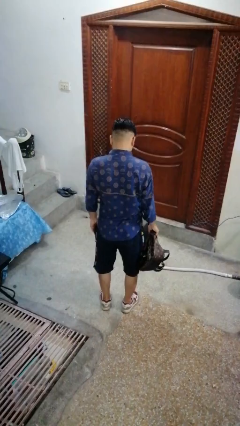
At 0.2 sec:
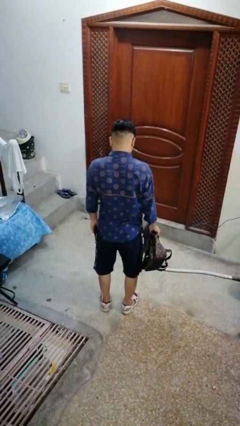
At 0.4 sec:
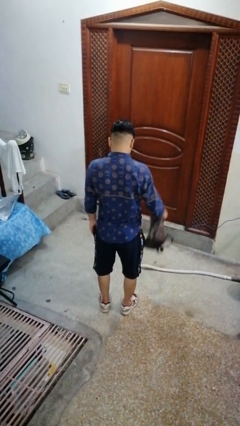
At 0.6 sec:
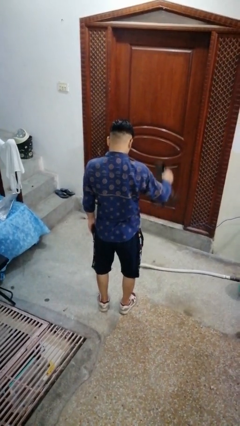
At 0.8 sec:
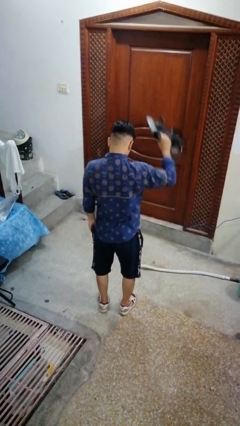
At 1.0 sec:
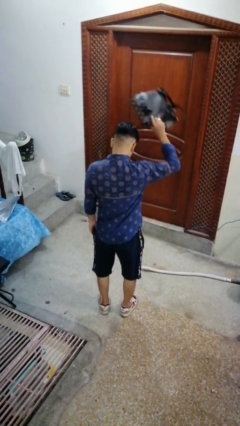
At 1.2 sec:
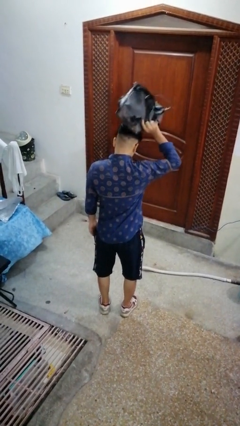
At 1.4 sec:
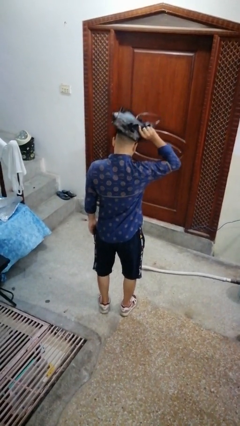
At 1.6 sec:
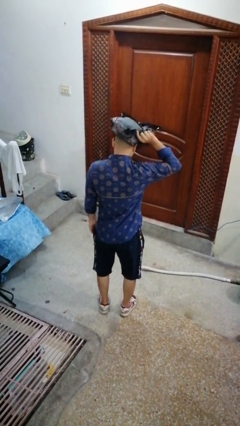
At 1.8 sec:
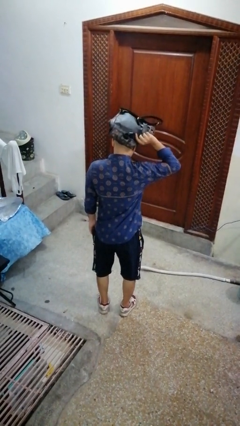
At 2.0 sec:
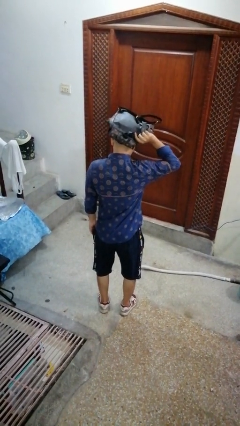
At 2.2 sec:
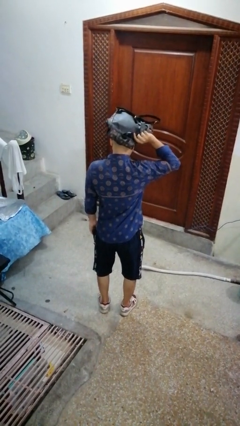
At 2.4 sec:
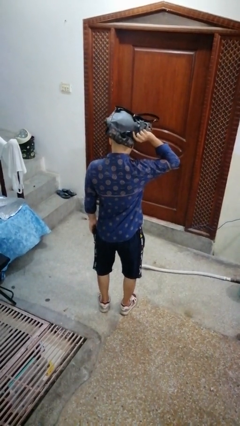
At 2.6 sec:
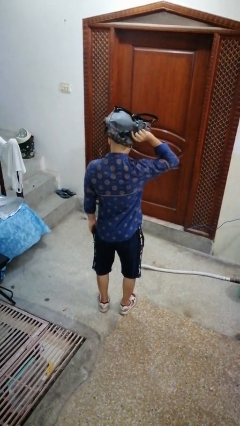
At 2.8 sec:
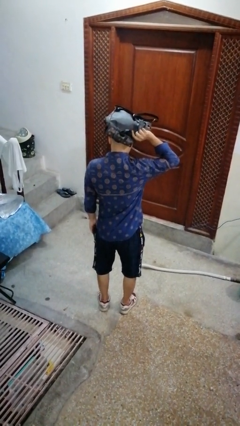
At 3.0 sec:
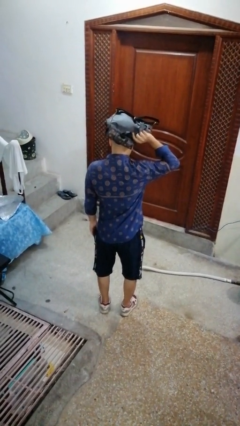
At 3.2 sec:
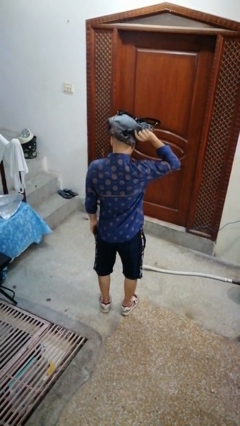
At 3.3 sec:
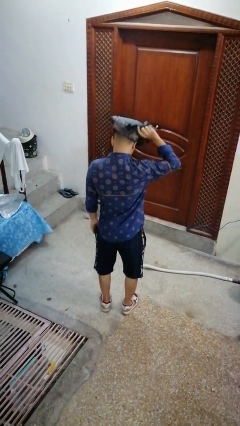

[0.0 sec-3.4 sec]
person holds object above head

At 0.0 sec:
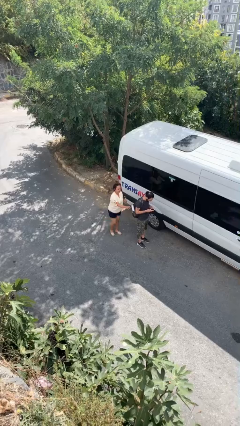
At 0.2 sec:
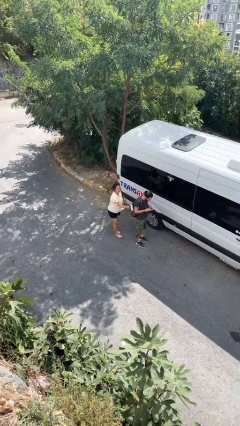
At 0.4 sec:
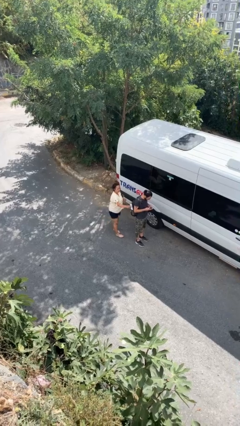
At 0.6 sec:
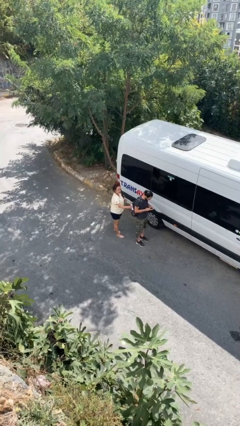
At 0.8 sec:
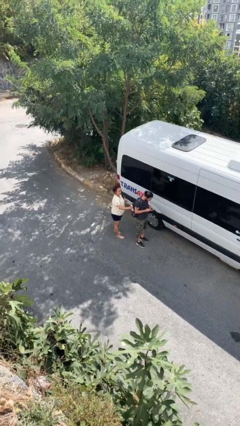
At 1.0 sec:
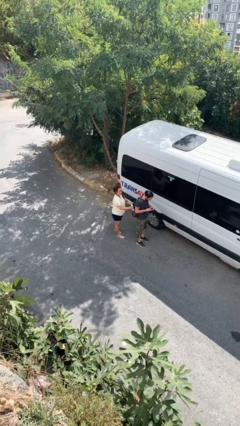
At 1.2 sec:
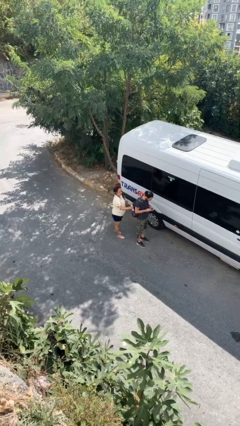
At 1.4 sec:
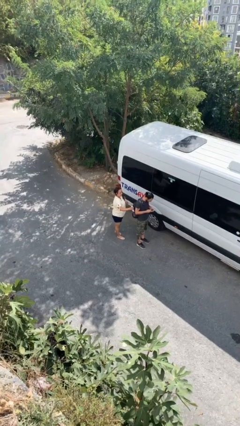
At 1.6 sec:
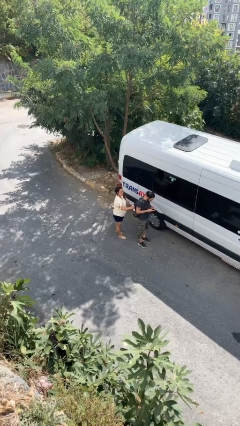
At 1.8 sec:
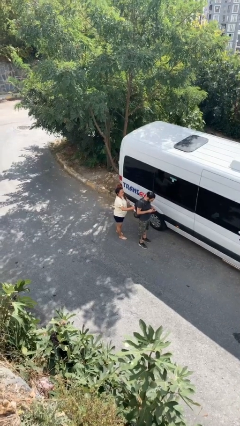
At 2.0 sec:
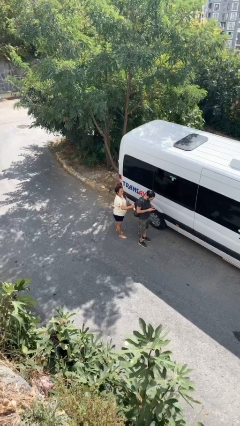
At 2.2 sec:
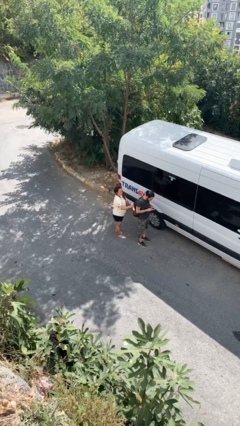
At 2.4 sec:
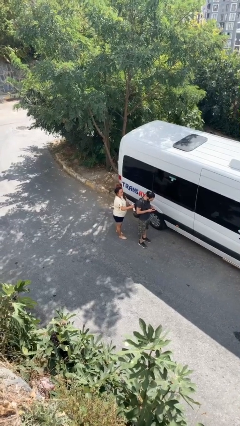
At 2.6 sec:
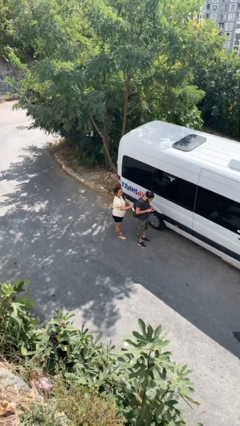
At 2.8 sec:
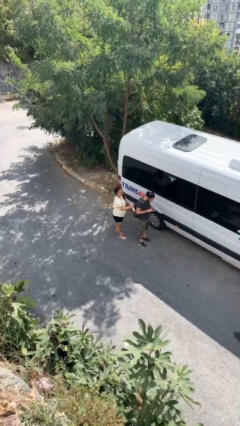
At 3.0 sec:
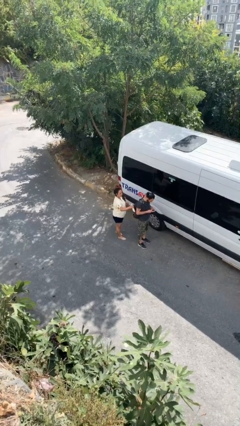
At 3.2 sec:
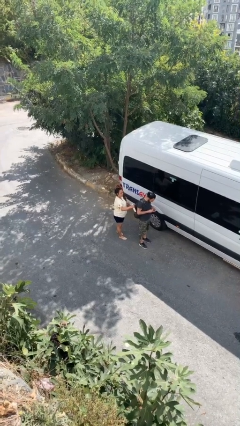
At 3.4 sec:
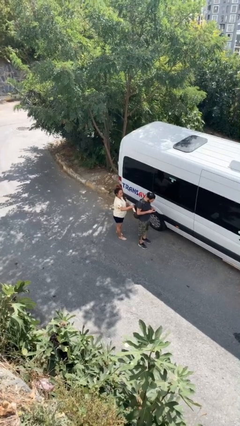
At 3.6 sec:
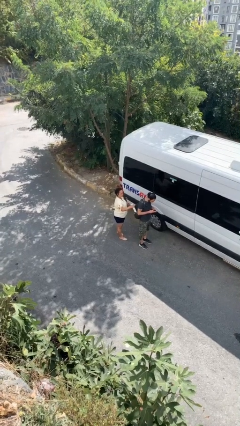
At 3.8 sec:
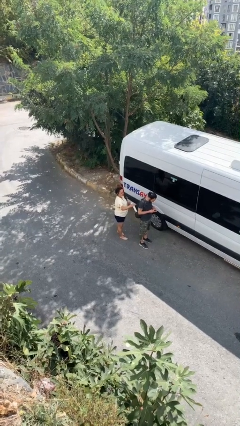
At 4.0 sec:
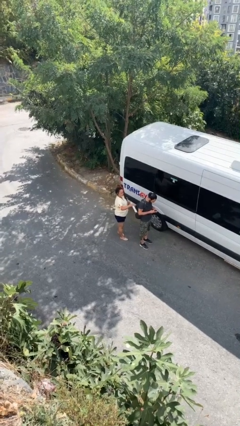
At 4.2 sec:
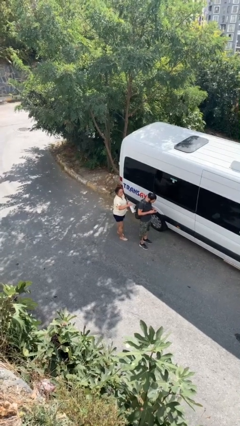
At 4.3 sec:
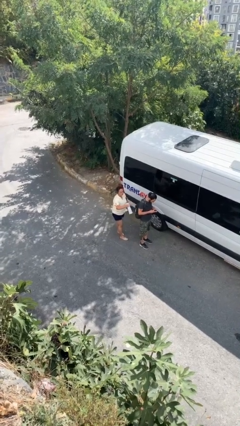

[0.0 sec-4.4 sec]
person steals object from person

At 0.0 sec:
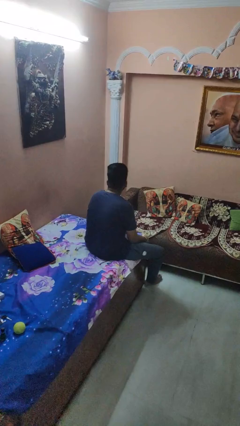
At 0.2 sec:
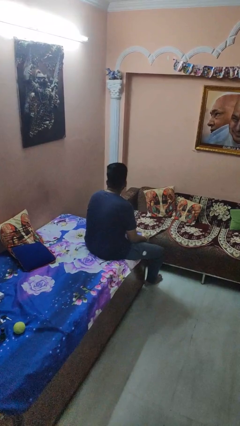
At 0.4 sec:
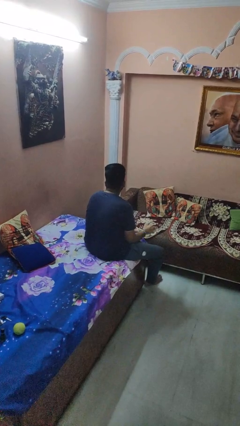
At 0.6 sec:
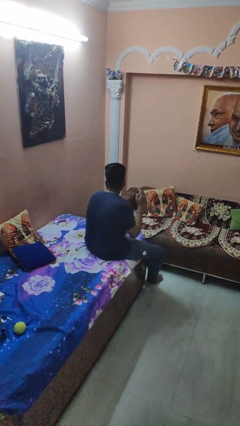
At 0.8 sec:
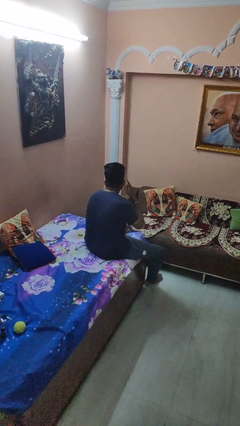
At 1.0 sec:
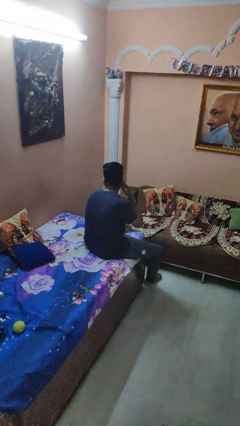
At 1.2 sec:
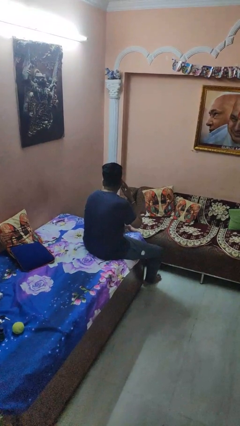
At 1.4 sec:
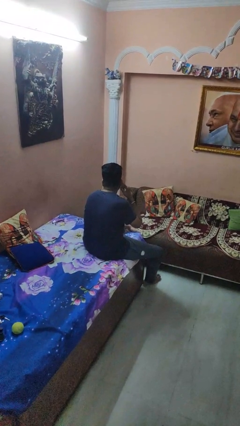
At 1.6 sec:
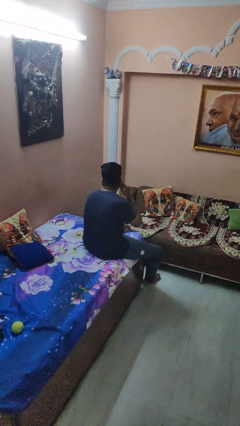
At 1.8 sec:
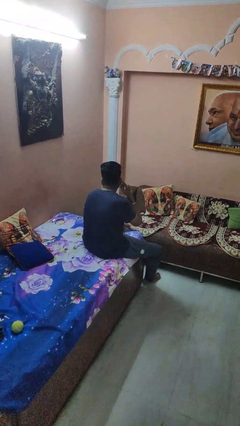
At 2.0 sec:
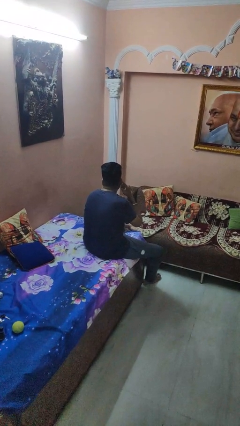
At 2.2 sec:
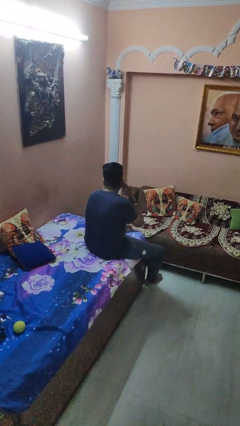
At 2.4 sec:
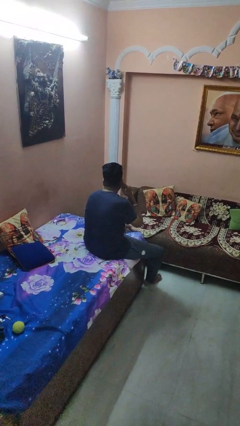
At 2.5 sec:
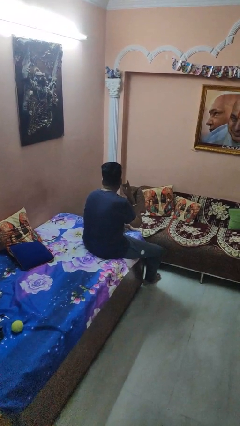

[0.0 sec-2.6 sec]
person gestures listen closely

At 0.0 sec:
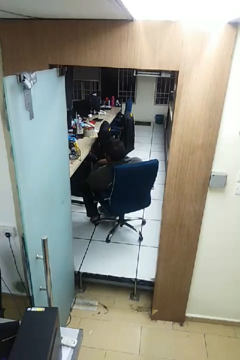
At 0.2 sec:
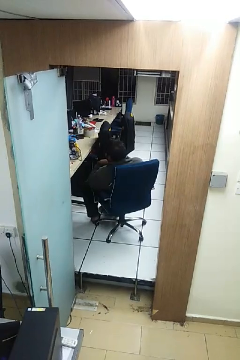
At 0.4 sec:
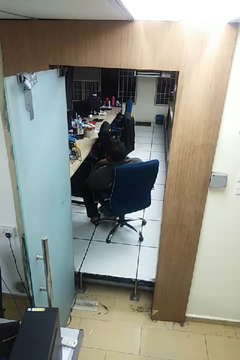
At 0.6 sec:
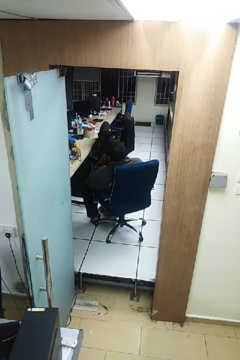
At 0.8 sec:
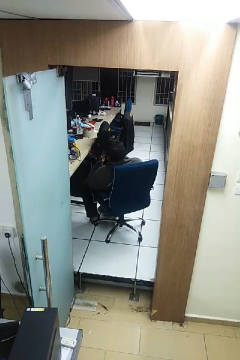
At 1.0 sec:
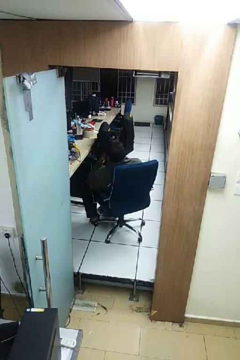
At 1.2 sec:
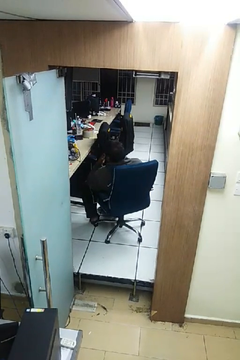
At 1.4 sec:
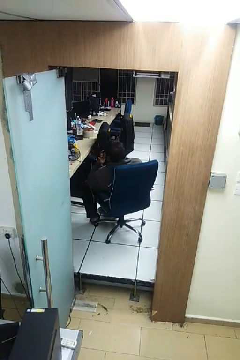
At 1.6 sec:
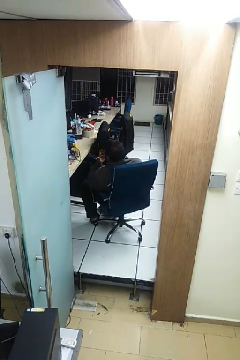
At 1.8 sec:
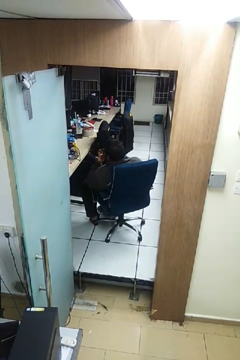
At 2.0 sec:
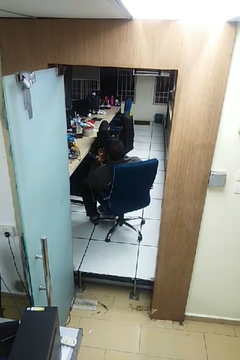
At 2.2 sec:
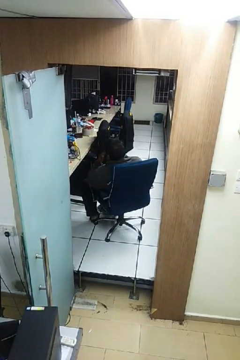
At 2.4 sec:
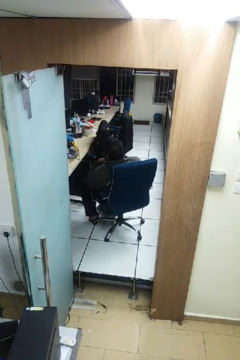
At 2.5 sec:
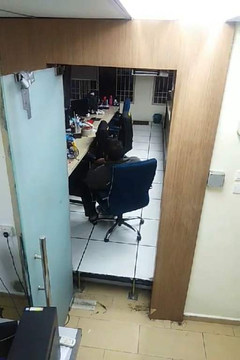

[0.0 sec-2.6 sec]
person licks fingers

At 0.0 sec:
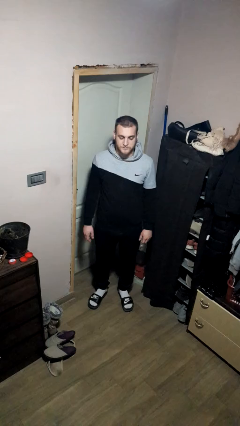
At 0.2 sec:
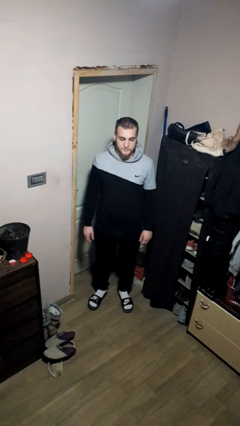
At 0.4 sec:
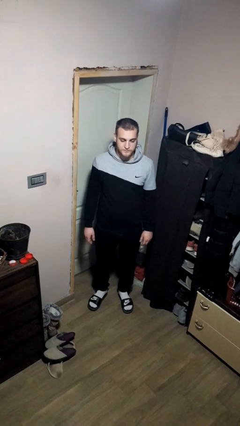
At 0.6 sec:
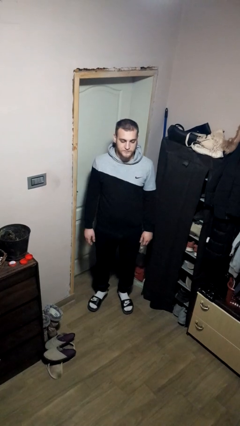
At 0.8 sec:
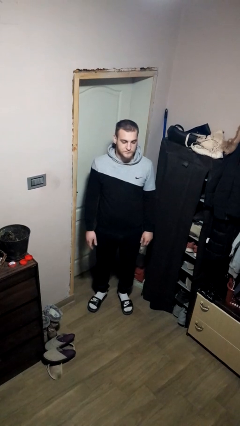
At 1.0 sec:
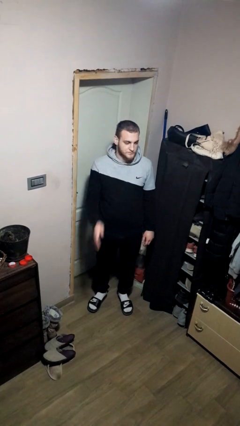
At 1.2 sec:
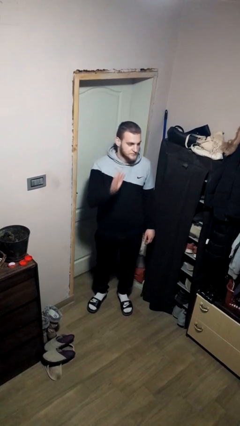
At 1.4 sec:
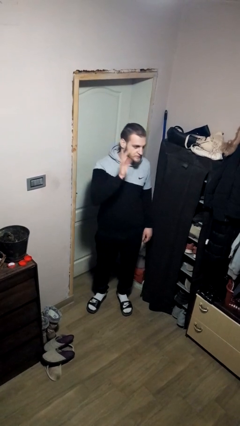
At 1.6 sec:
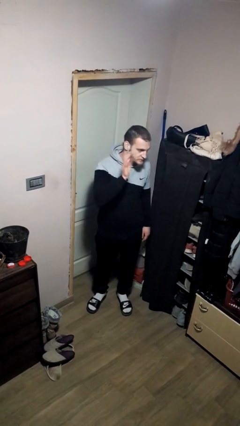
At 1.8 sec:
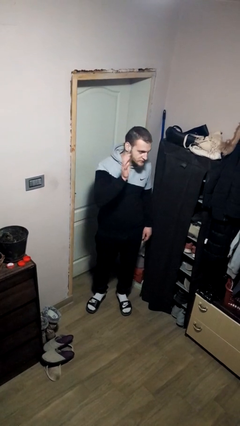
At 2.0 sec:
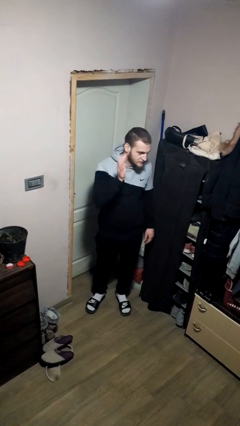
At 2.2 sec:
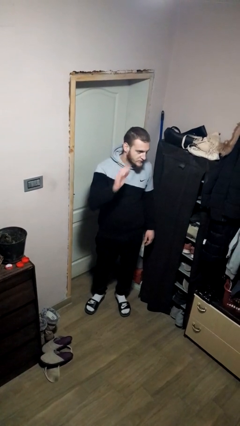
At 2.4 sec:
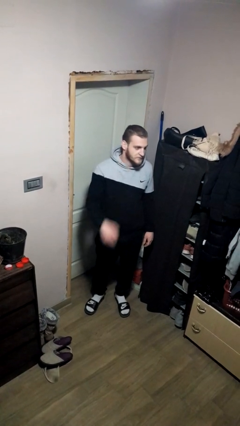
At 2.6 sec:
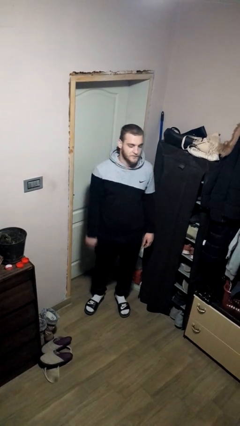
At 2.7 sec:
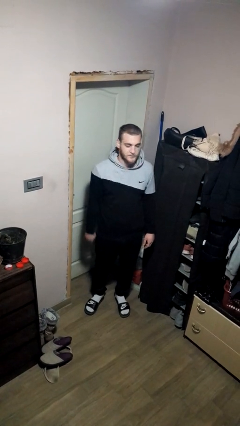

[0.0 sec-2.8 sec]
person waves at person

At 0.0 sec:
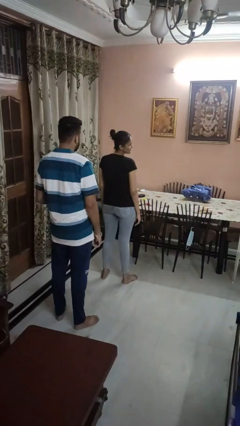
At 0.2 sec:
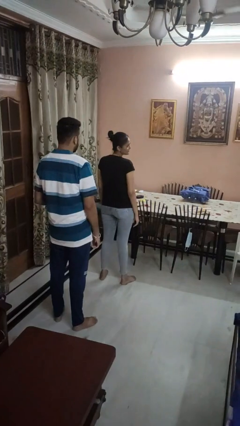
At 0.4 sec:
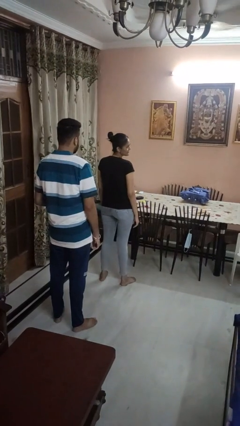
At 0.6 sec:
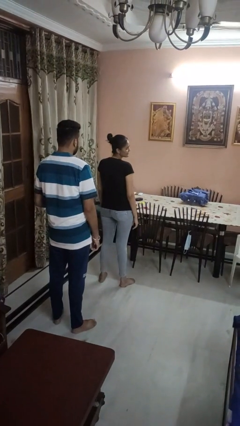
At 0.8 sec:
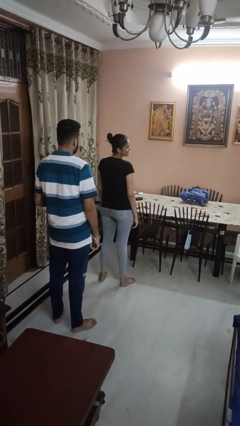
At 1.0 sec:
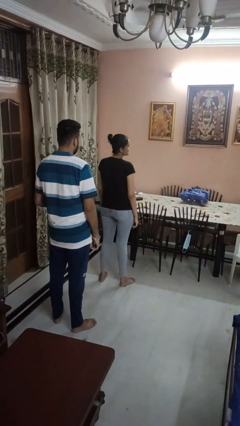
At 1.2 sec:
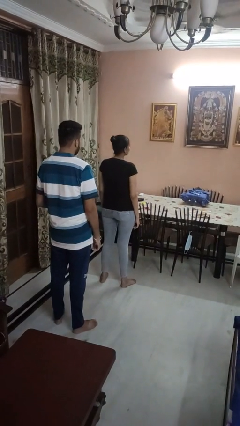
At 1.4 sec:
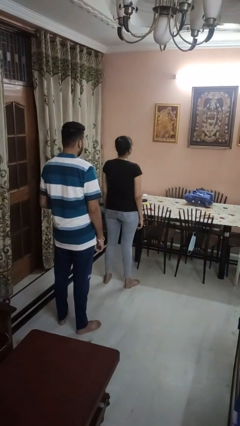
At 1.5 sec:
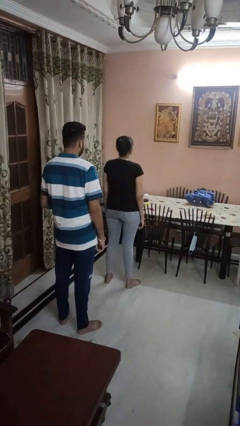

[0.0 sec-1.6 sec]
person looks over shoulder
